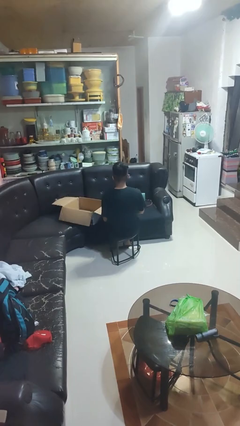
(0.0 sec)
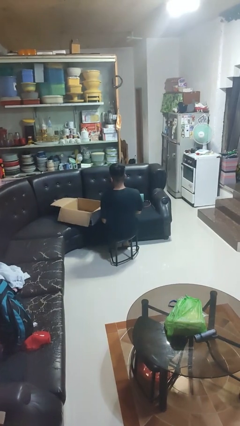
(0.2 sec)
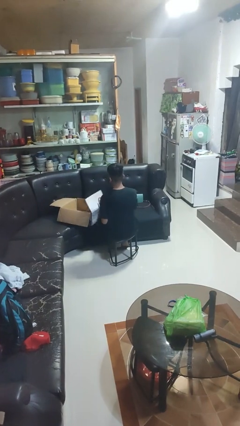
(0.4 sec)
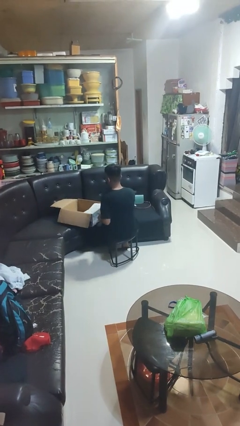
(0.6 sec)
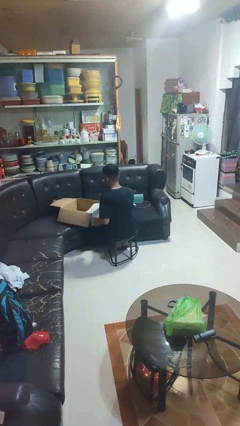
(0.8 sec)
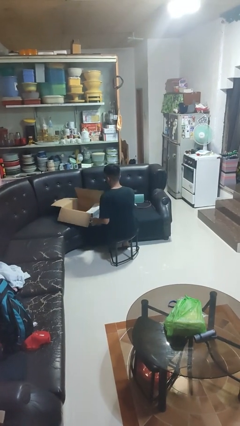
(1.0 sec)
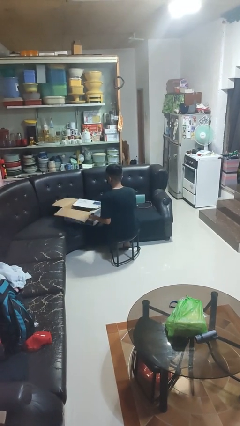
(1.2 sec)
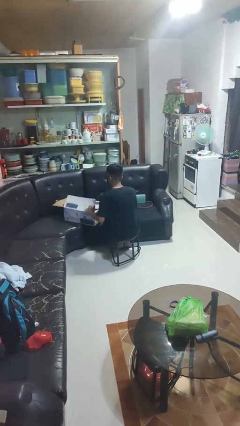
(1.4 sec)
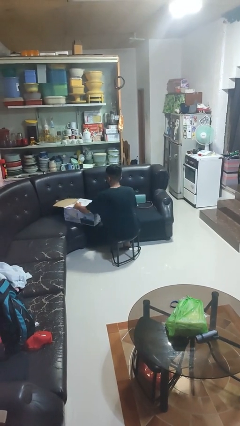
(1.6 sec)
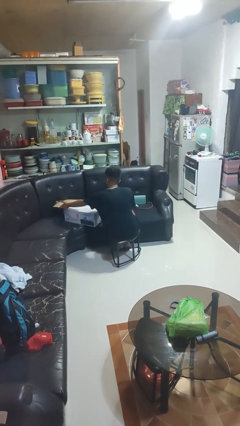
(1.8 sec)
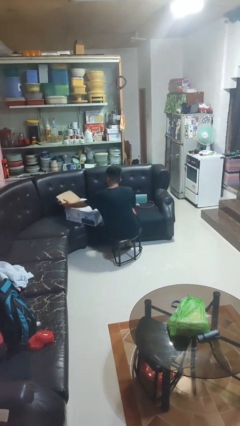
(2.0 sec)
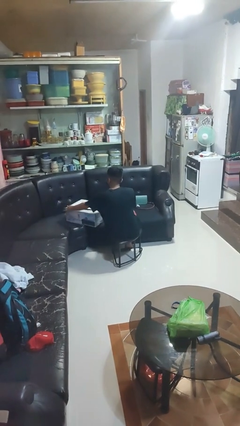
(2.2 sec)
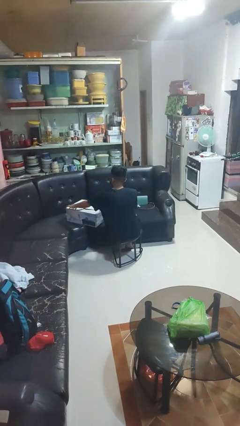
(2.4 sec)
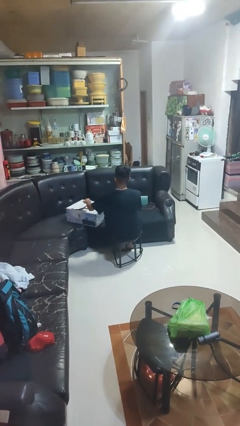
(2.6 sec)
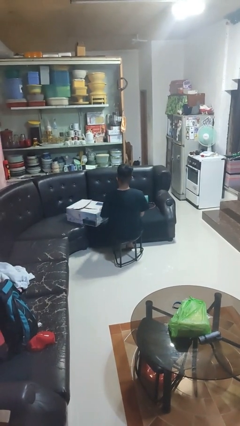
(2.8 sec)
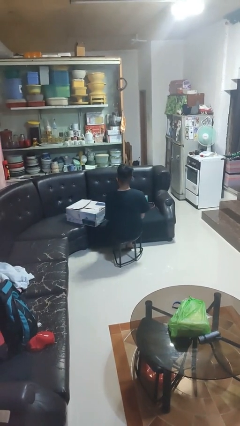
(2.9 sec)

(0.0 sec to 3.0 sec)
person closes box

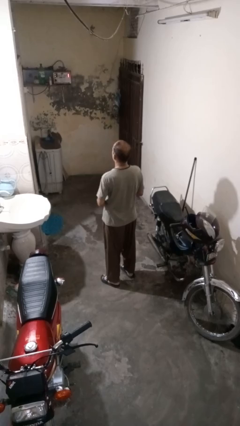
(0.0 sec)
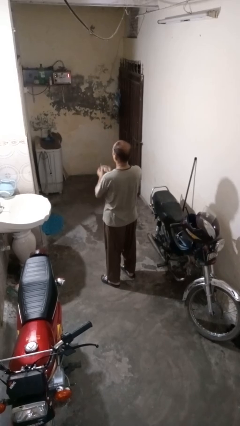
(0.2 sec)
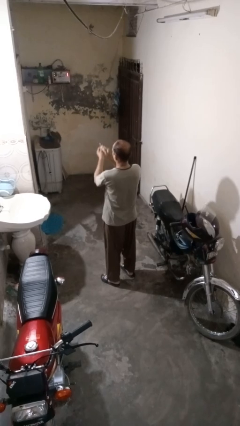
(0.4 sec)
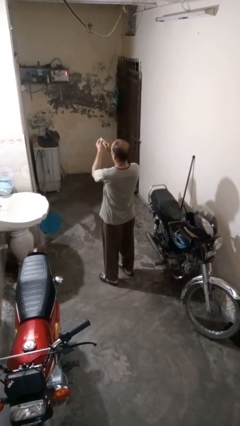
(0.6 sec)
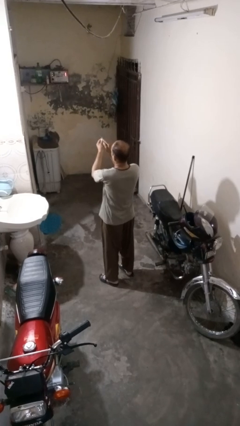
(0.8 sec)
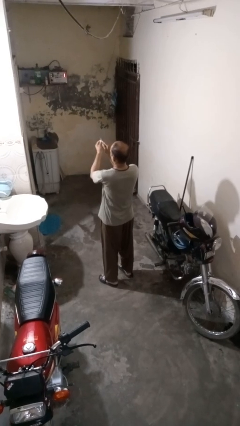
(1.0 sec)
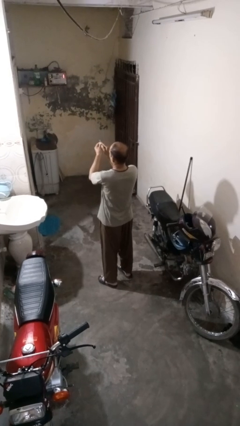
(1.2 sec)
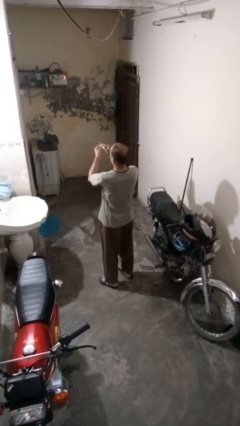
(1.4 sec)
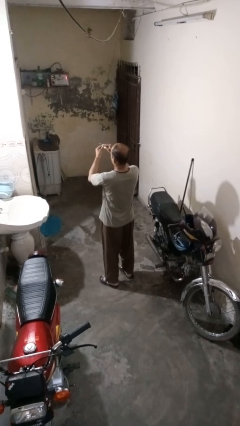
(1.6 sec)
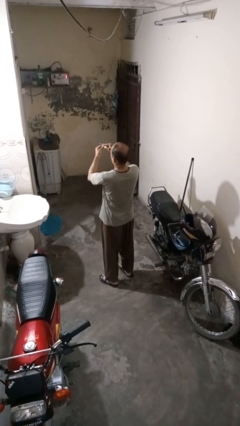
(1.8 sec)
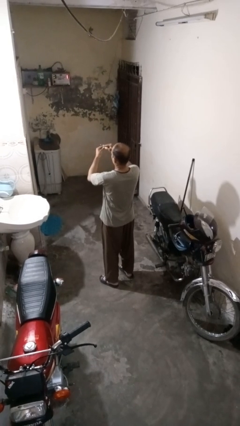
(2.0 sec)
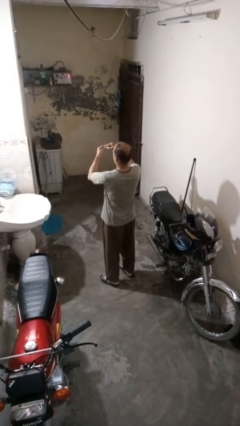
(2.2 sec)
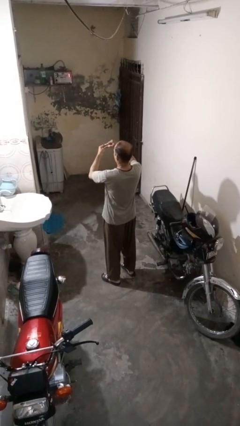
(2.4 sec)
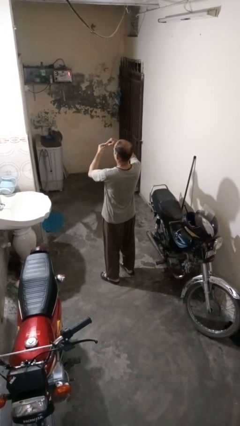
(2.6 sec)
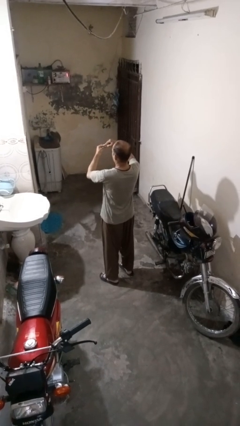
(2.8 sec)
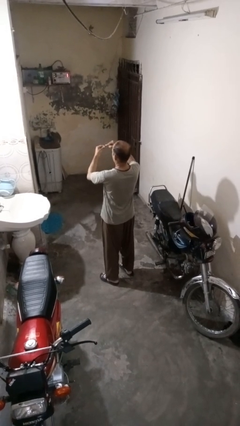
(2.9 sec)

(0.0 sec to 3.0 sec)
person files fingernails

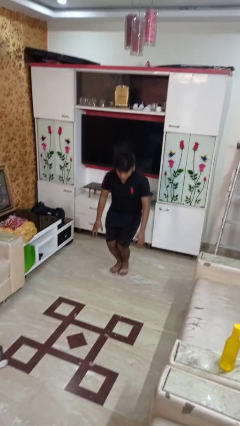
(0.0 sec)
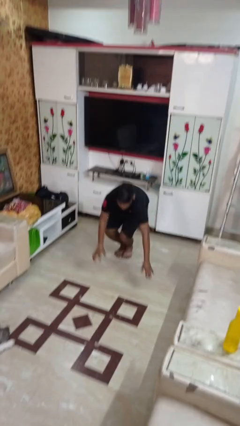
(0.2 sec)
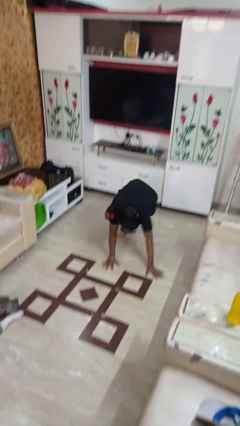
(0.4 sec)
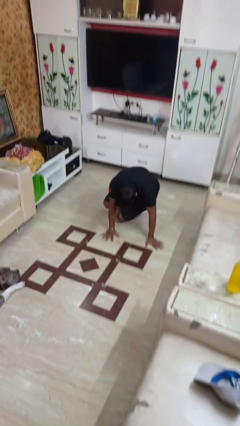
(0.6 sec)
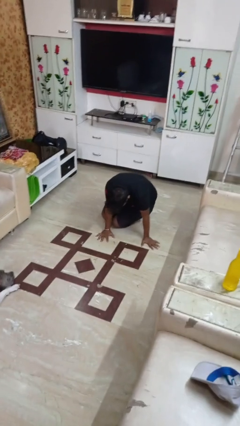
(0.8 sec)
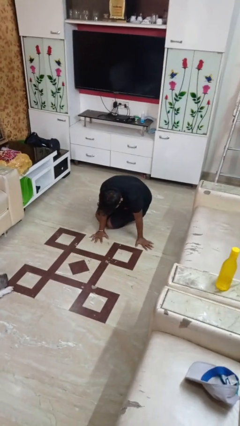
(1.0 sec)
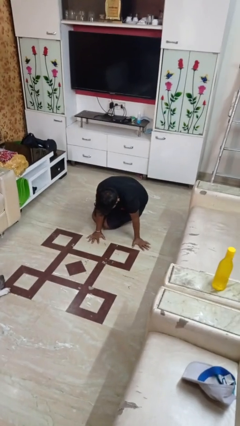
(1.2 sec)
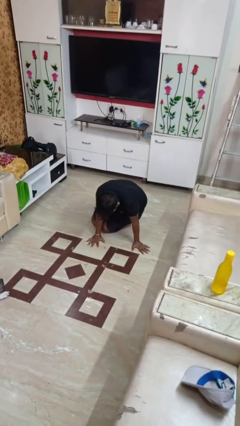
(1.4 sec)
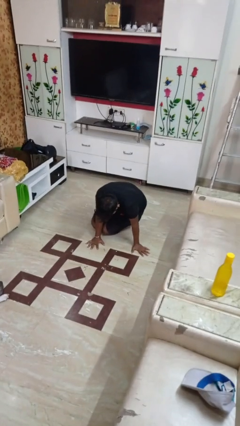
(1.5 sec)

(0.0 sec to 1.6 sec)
person falls while standing

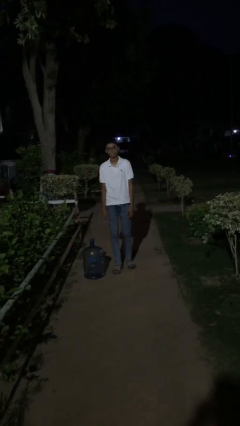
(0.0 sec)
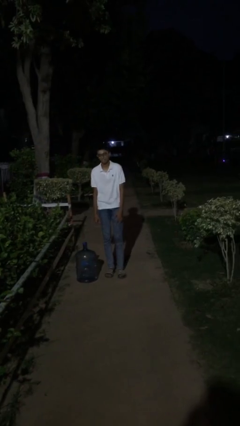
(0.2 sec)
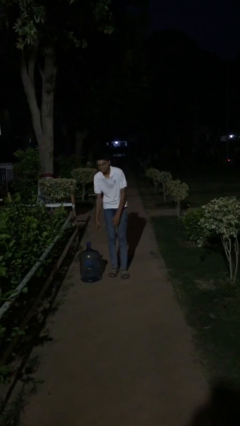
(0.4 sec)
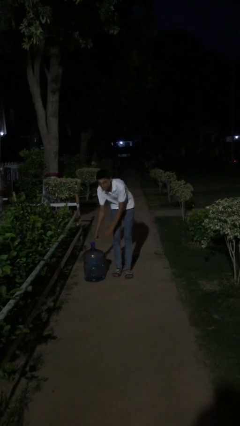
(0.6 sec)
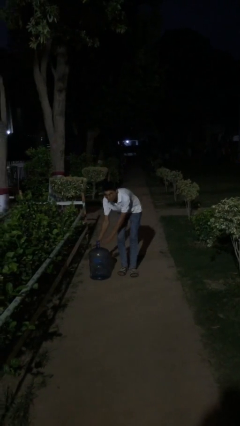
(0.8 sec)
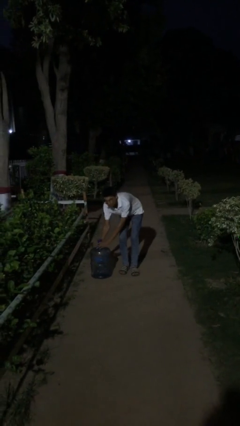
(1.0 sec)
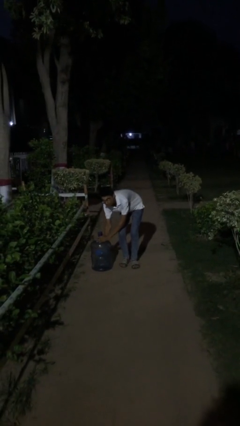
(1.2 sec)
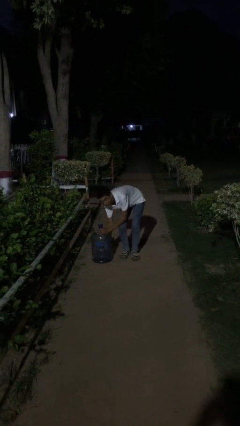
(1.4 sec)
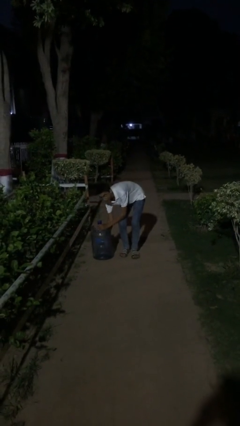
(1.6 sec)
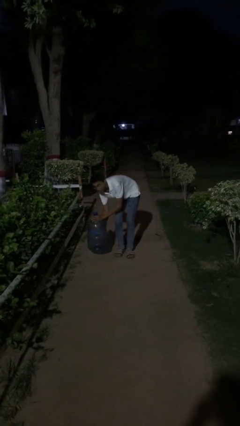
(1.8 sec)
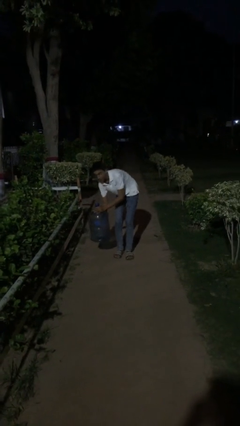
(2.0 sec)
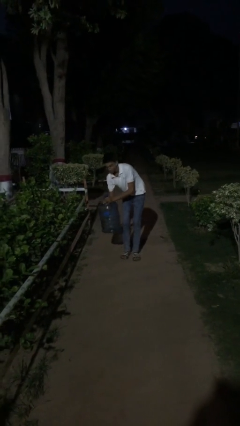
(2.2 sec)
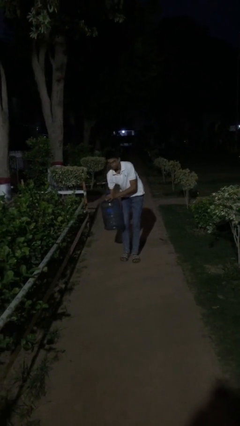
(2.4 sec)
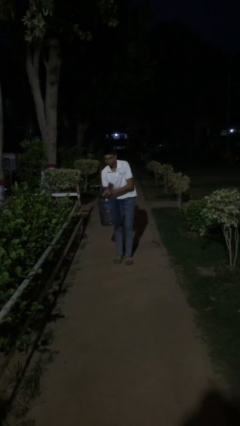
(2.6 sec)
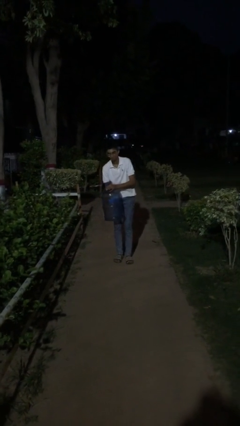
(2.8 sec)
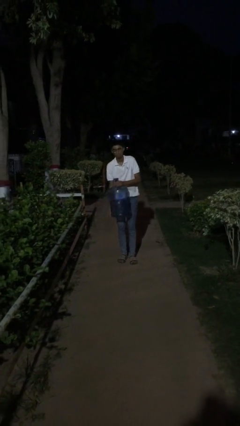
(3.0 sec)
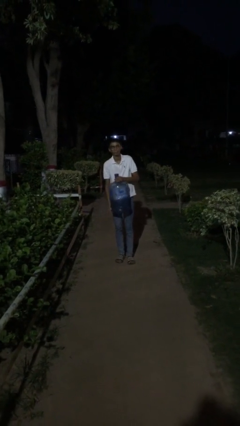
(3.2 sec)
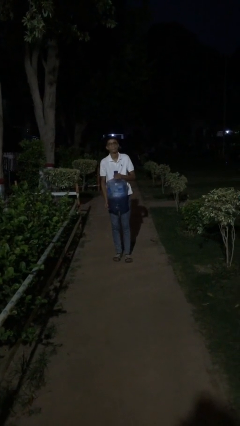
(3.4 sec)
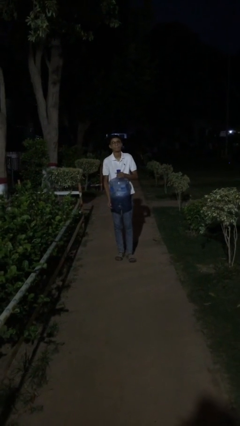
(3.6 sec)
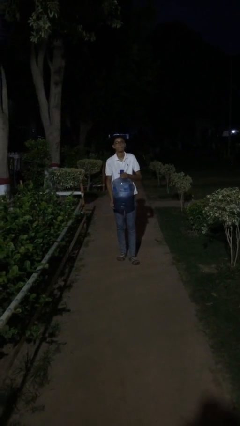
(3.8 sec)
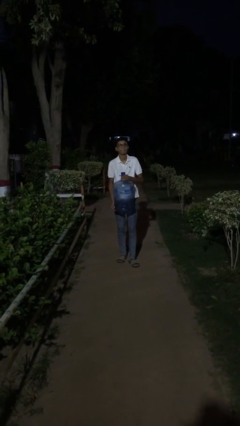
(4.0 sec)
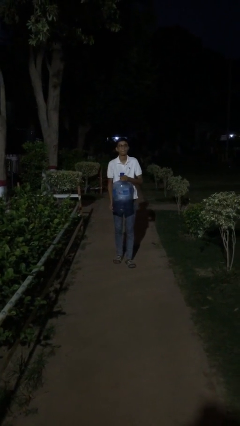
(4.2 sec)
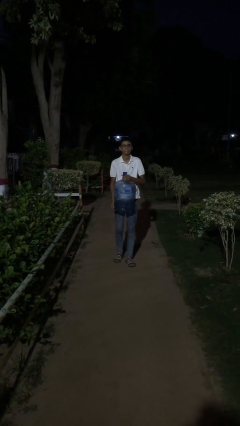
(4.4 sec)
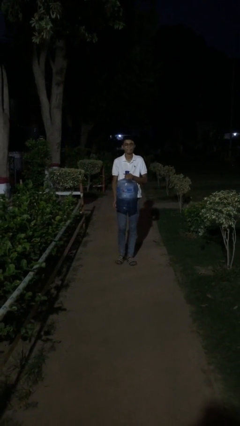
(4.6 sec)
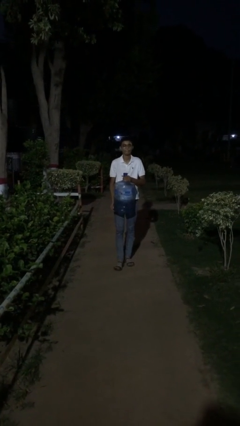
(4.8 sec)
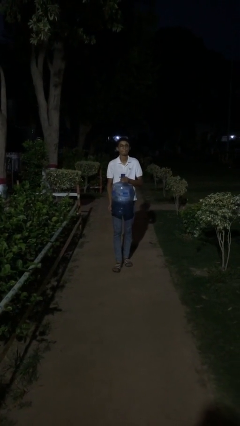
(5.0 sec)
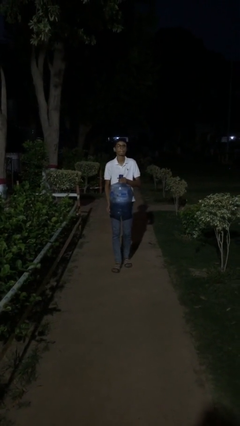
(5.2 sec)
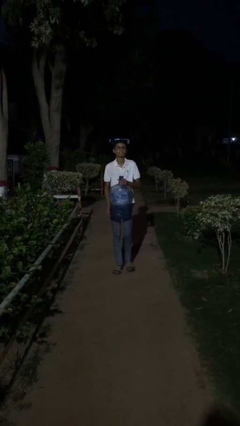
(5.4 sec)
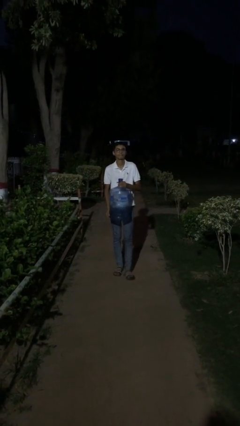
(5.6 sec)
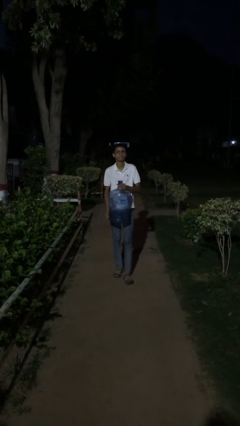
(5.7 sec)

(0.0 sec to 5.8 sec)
person carries heavy object

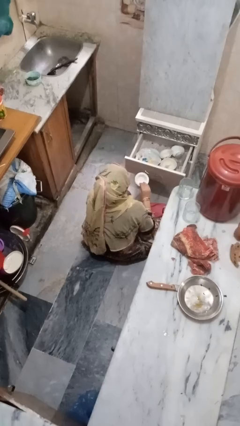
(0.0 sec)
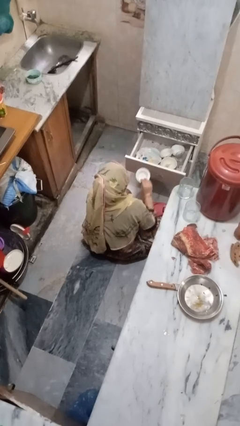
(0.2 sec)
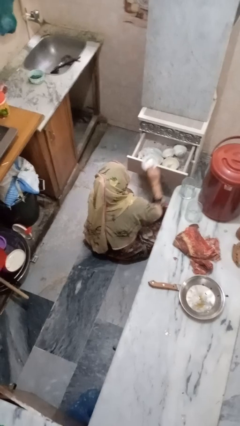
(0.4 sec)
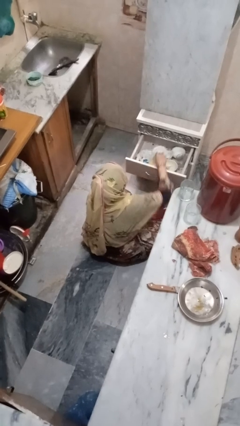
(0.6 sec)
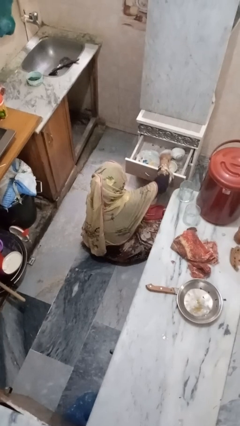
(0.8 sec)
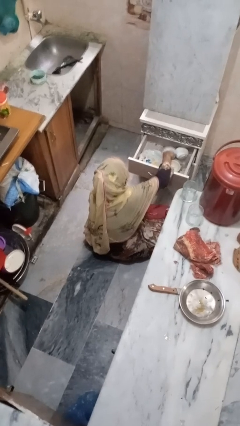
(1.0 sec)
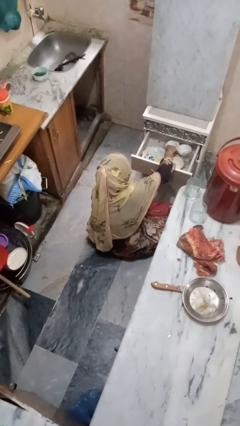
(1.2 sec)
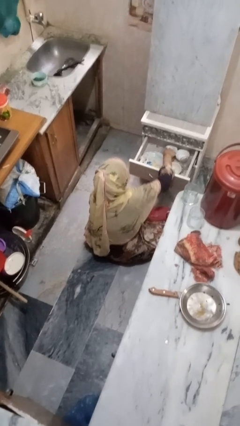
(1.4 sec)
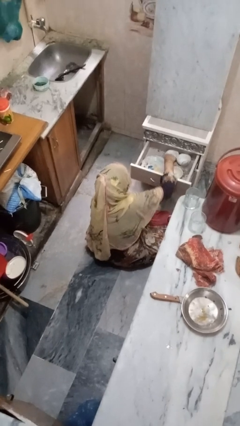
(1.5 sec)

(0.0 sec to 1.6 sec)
person puts object into kitchen drawer

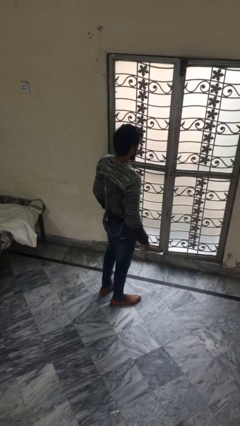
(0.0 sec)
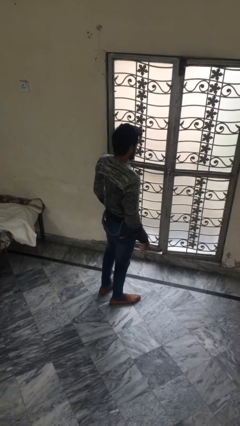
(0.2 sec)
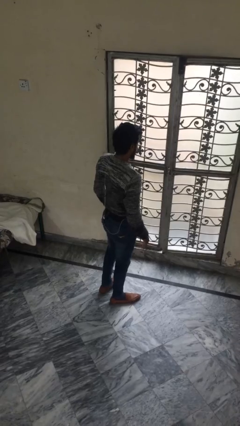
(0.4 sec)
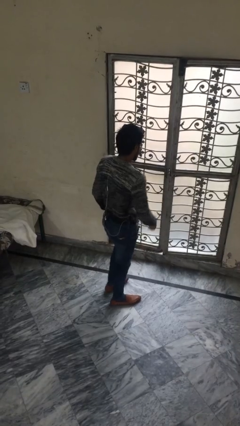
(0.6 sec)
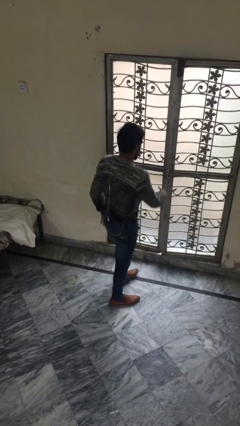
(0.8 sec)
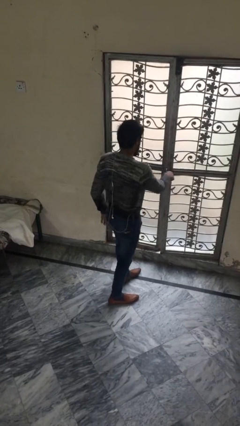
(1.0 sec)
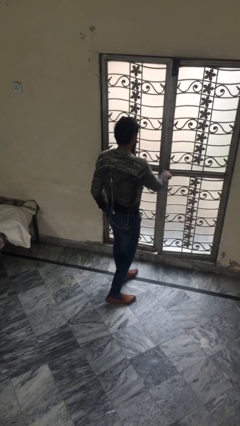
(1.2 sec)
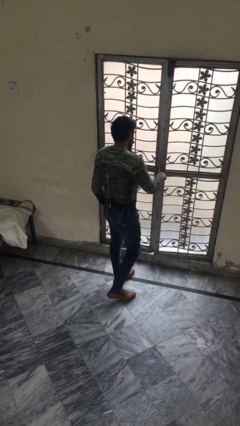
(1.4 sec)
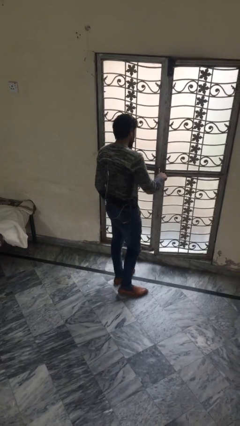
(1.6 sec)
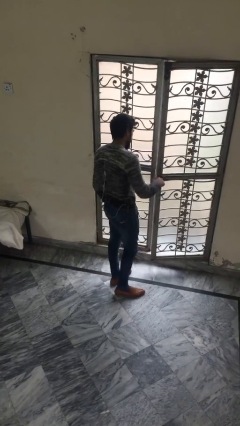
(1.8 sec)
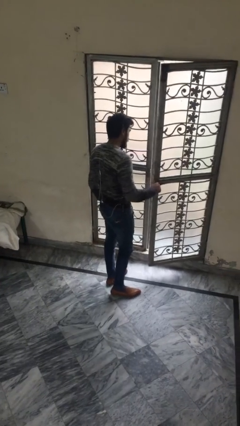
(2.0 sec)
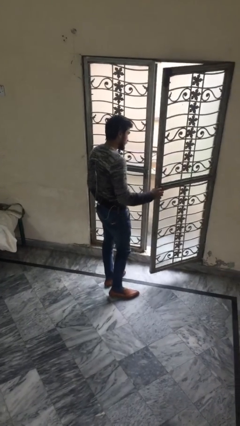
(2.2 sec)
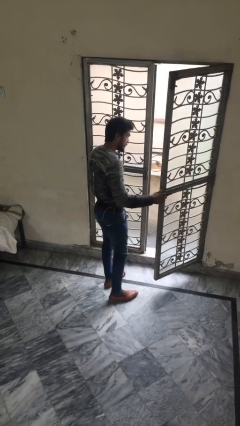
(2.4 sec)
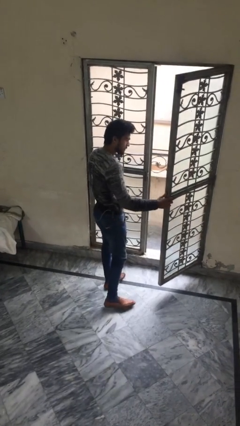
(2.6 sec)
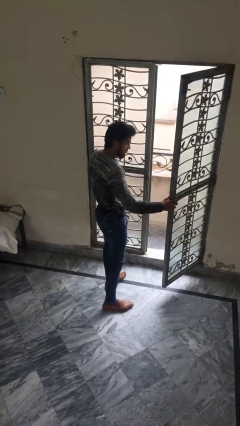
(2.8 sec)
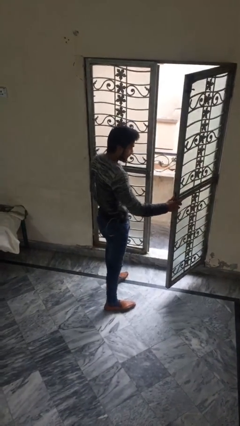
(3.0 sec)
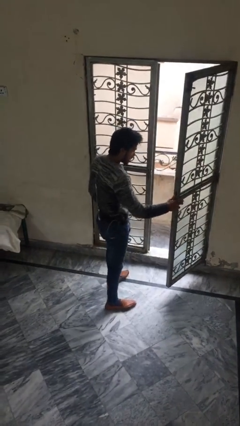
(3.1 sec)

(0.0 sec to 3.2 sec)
person opens facility door
